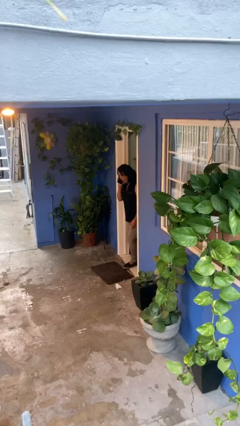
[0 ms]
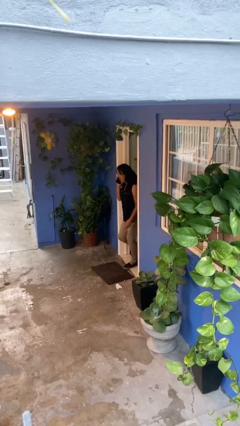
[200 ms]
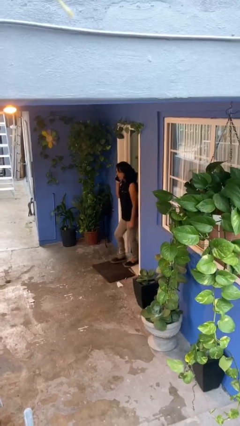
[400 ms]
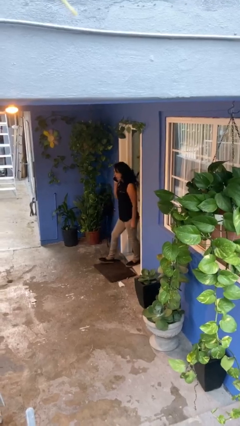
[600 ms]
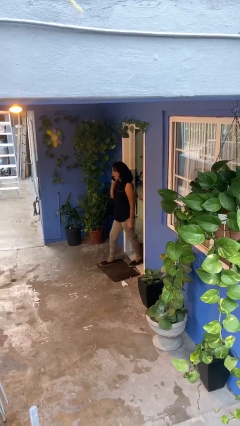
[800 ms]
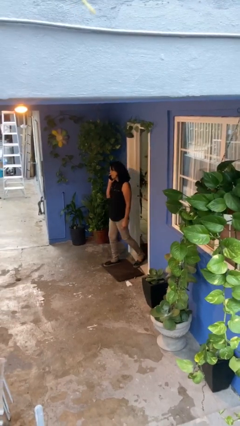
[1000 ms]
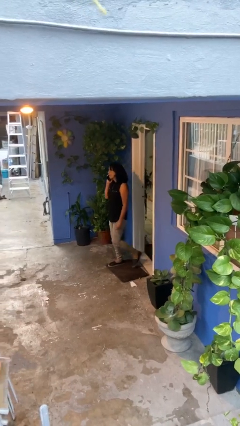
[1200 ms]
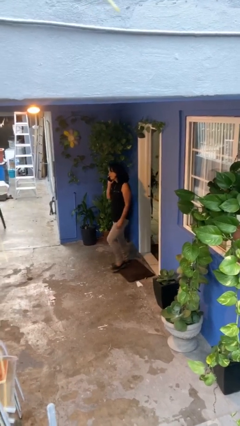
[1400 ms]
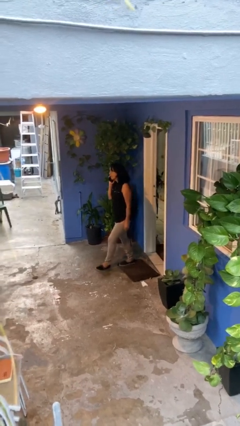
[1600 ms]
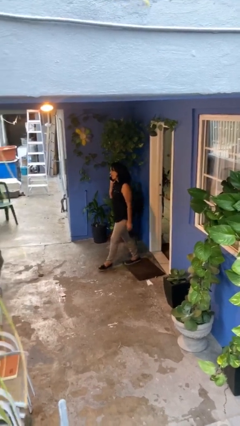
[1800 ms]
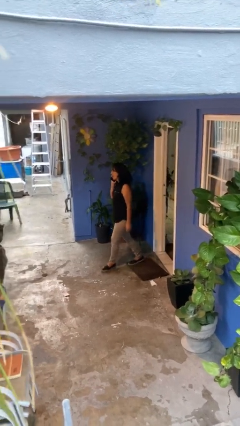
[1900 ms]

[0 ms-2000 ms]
person enters scene through structure

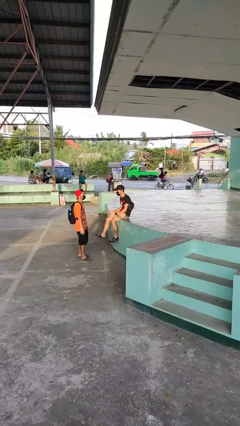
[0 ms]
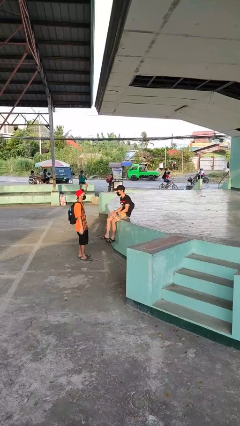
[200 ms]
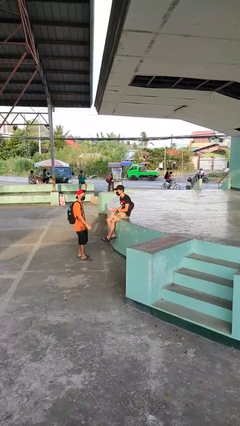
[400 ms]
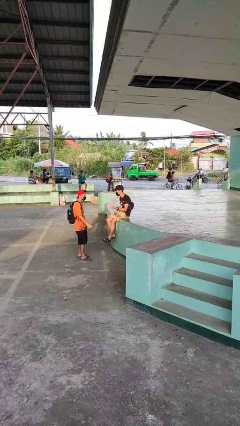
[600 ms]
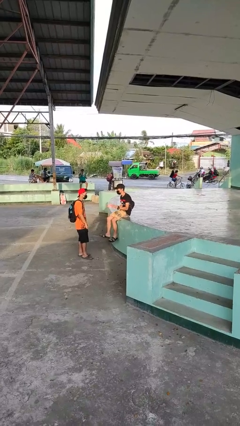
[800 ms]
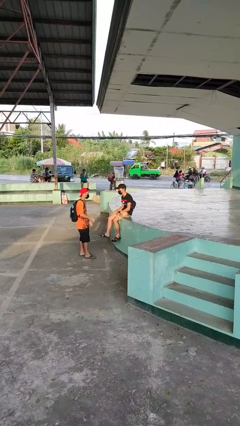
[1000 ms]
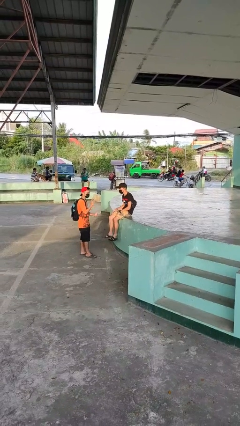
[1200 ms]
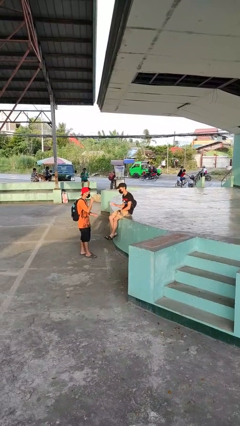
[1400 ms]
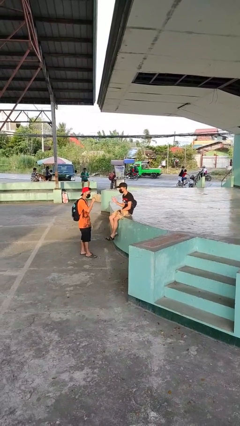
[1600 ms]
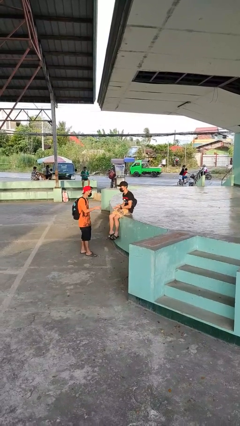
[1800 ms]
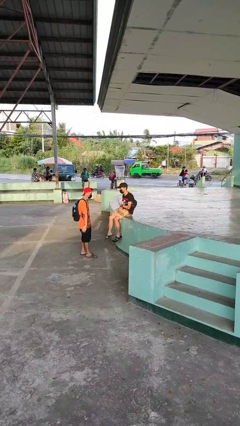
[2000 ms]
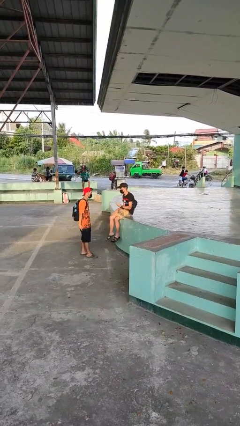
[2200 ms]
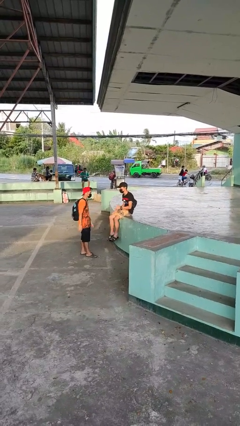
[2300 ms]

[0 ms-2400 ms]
person talks to person

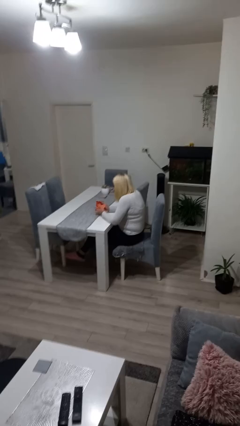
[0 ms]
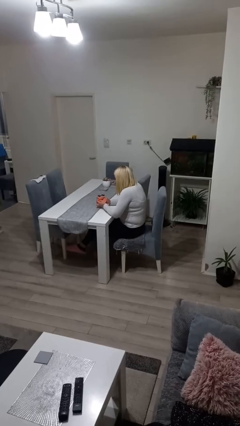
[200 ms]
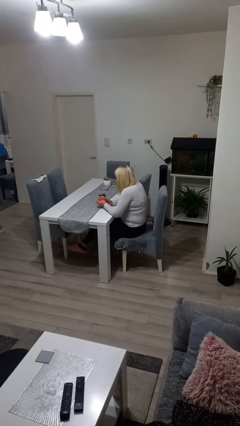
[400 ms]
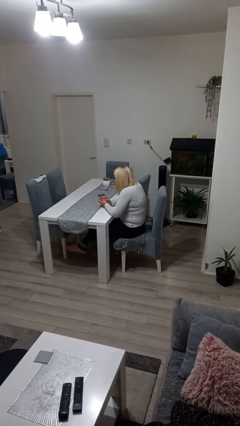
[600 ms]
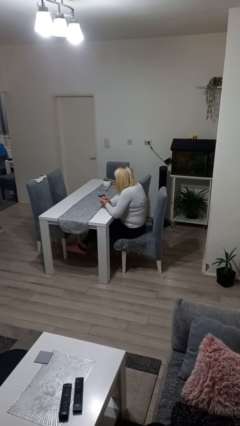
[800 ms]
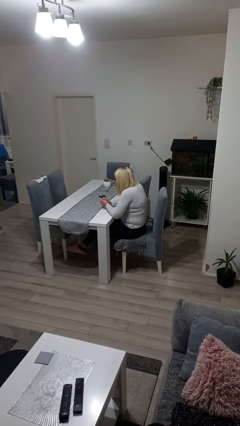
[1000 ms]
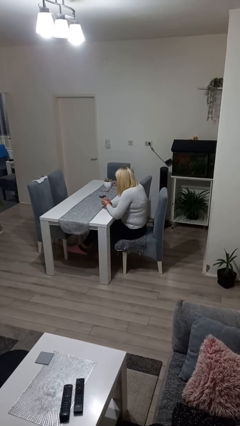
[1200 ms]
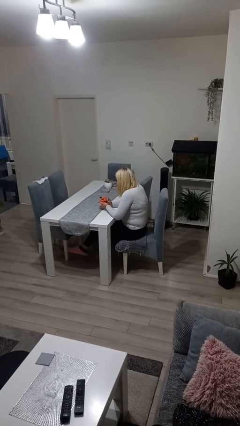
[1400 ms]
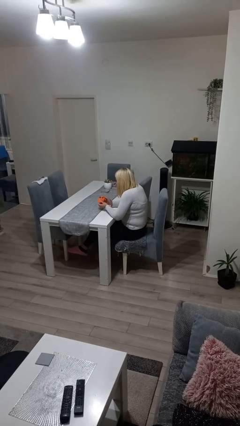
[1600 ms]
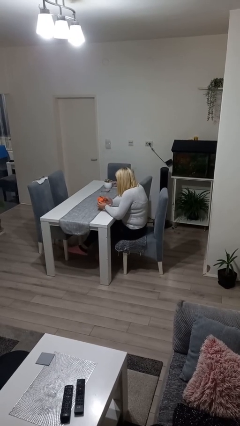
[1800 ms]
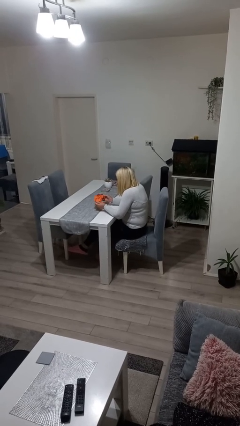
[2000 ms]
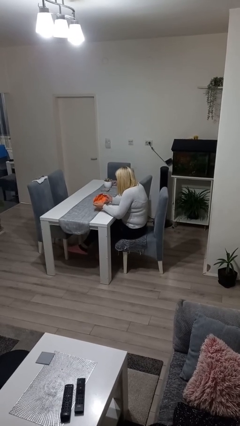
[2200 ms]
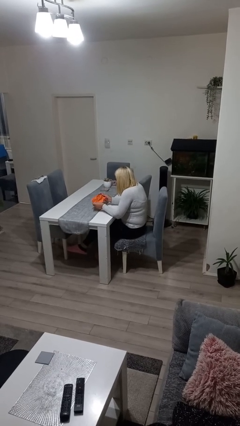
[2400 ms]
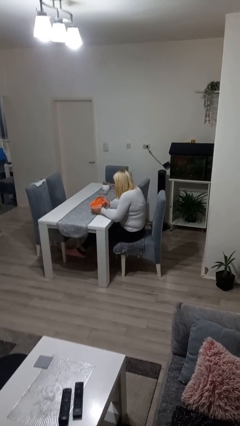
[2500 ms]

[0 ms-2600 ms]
person crumples paper

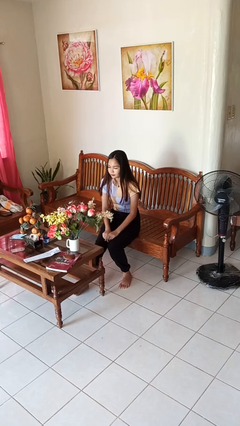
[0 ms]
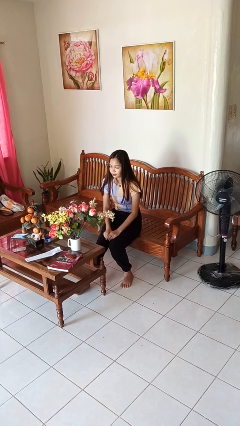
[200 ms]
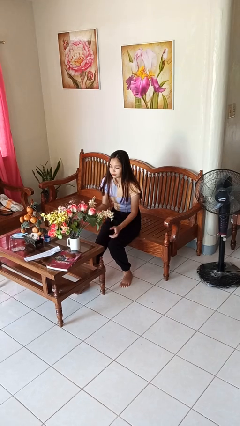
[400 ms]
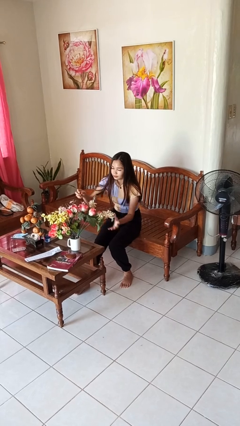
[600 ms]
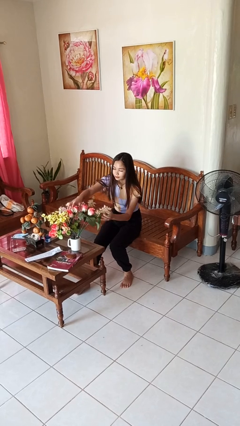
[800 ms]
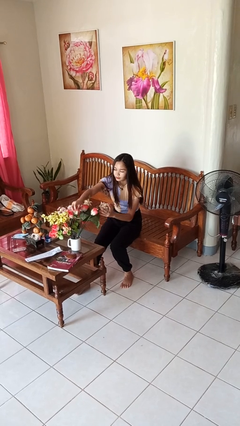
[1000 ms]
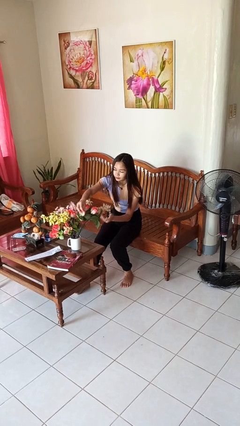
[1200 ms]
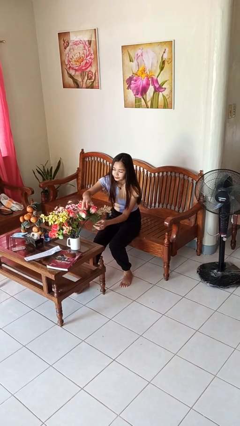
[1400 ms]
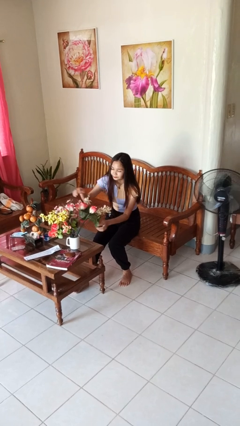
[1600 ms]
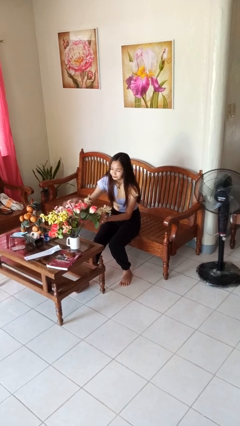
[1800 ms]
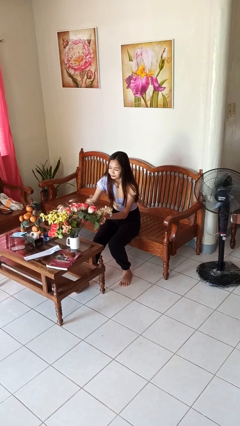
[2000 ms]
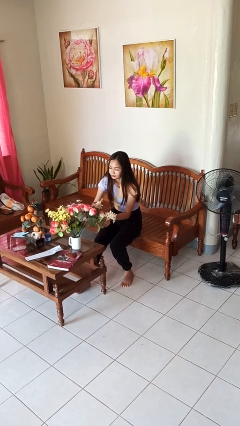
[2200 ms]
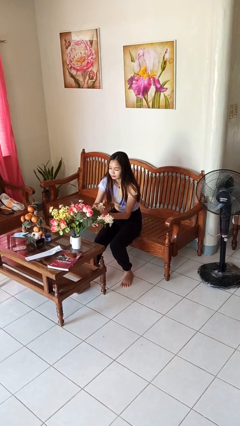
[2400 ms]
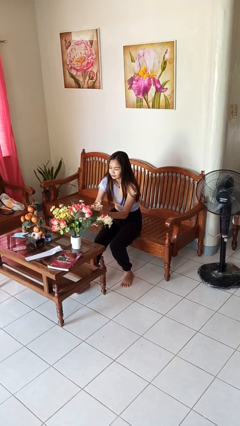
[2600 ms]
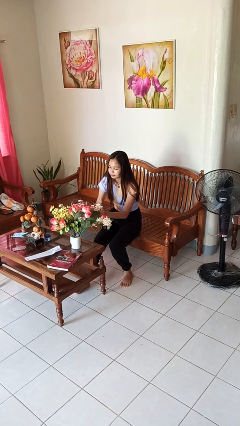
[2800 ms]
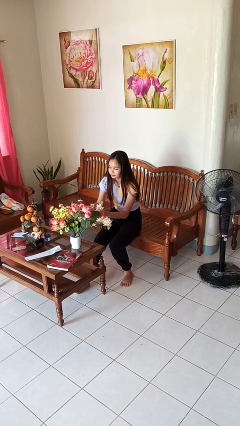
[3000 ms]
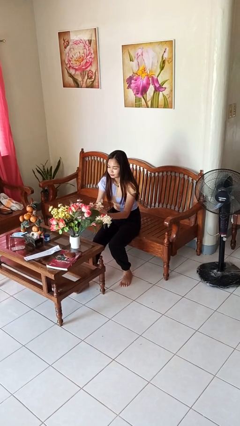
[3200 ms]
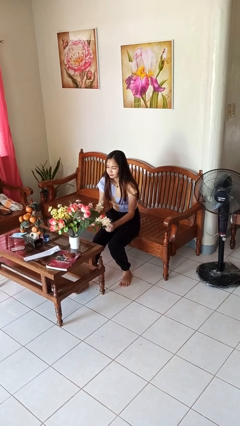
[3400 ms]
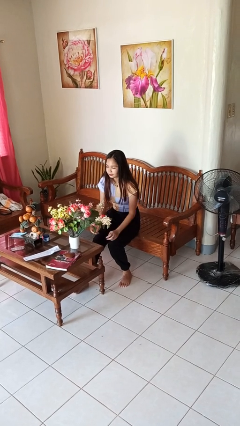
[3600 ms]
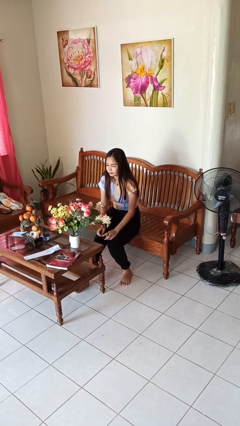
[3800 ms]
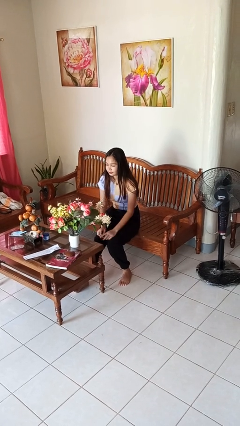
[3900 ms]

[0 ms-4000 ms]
person arranges flowers in vase

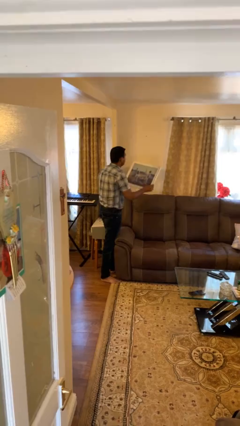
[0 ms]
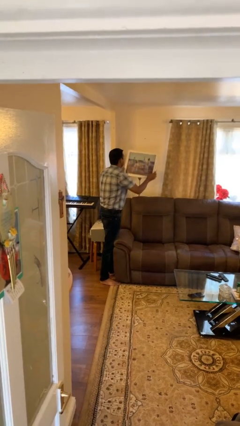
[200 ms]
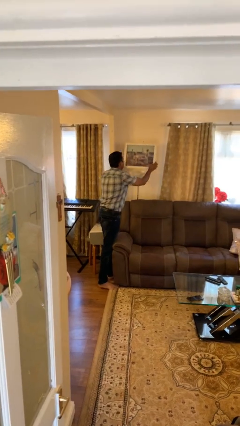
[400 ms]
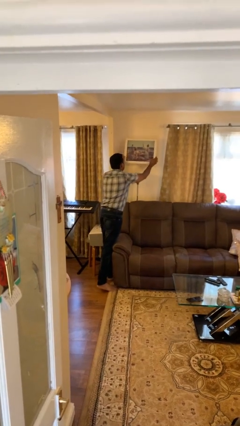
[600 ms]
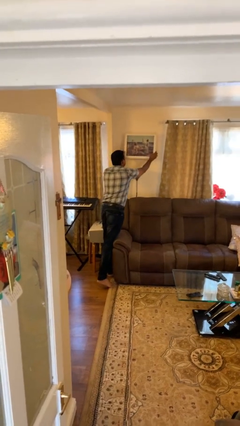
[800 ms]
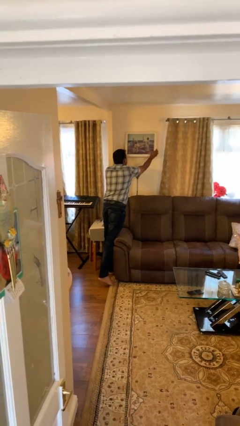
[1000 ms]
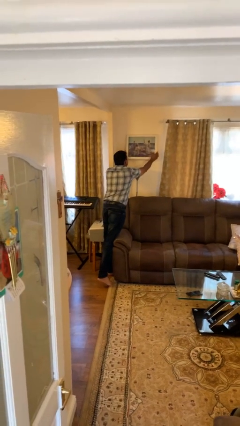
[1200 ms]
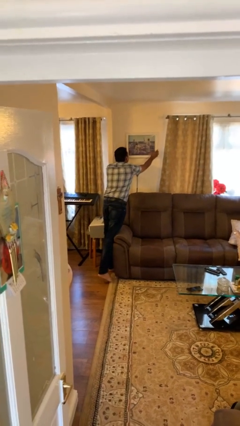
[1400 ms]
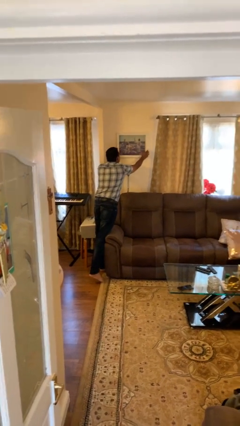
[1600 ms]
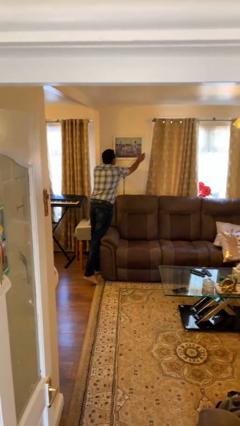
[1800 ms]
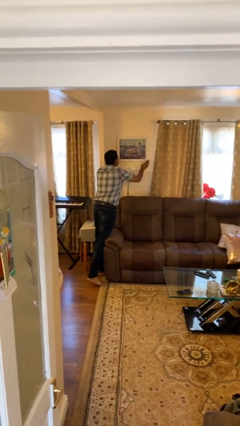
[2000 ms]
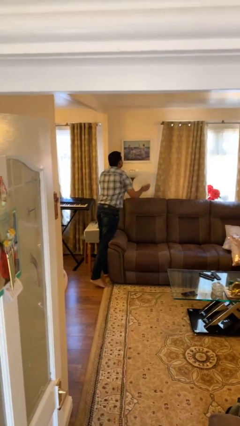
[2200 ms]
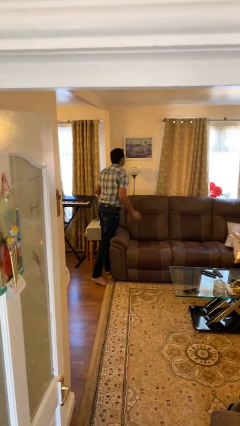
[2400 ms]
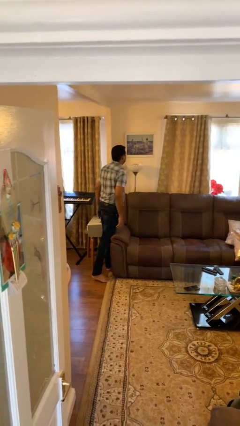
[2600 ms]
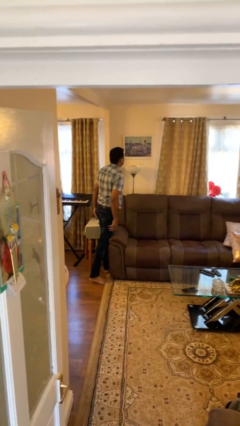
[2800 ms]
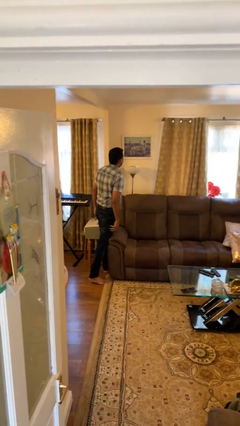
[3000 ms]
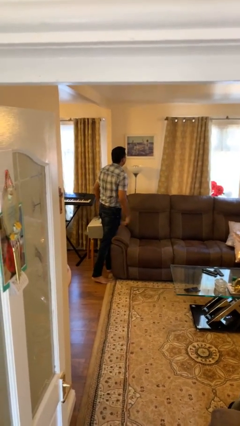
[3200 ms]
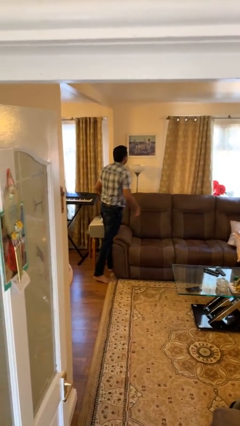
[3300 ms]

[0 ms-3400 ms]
person puts up picture frame

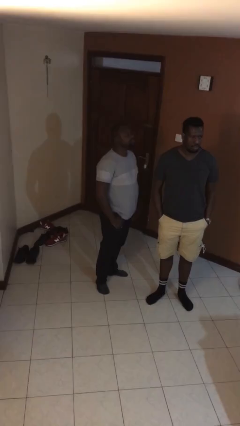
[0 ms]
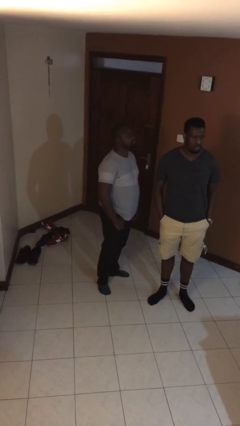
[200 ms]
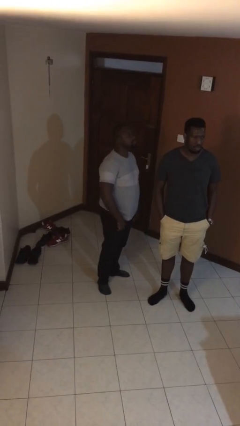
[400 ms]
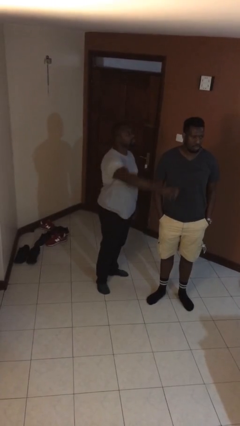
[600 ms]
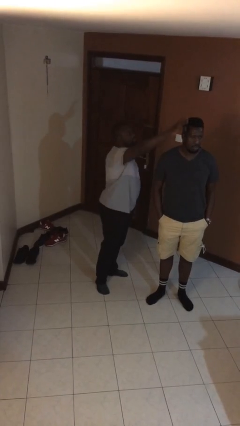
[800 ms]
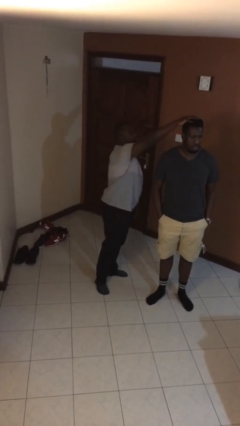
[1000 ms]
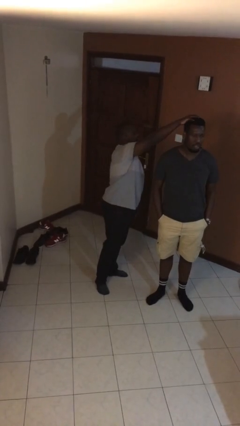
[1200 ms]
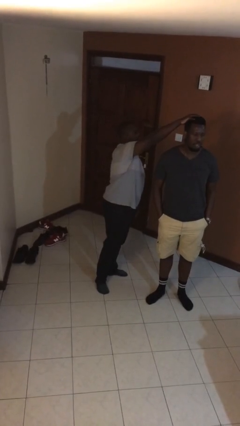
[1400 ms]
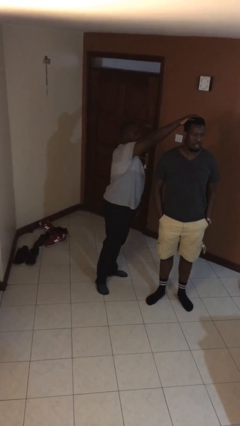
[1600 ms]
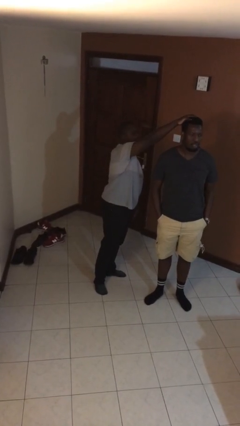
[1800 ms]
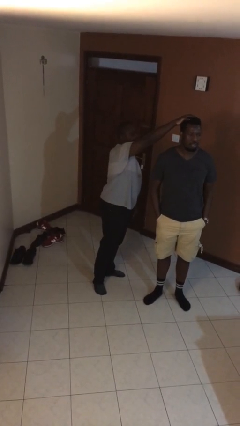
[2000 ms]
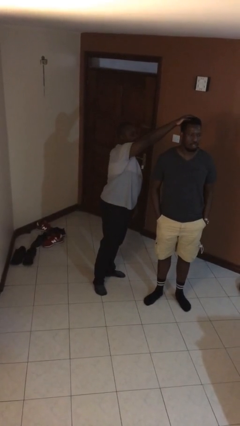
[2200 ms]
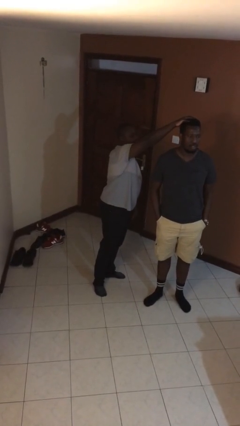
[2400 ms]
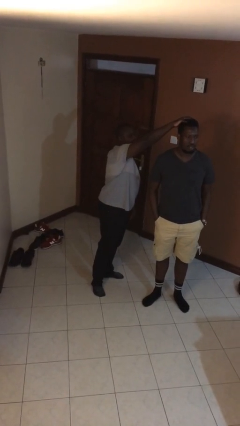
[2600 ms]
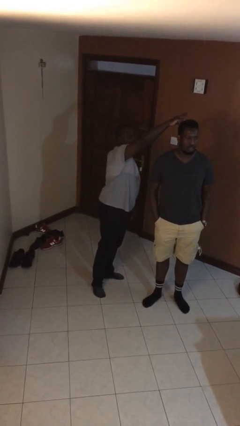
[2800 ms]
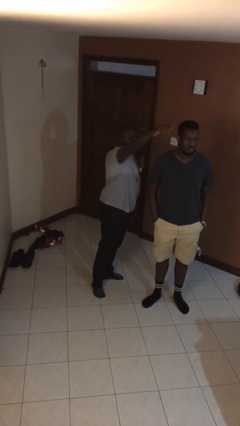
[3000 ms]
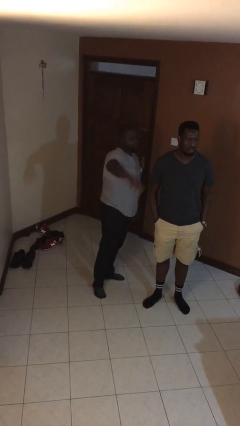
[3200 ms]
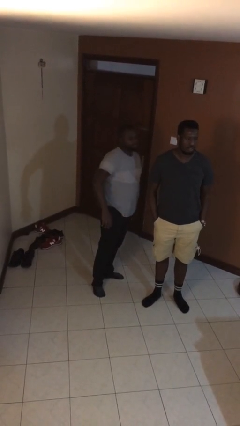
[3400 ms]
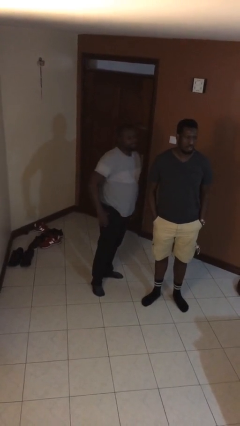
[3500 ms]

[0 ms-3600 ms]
person grabs person by hair
